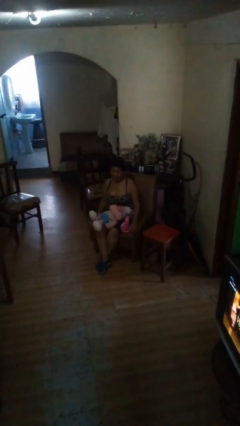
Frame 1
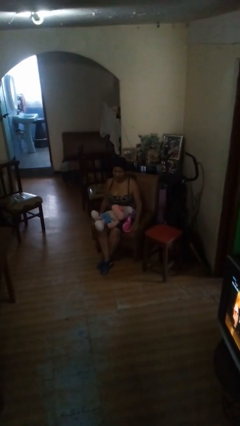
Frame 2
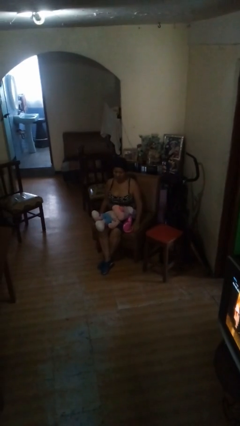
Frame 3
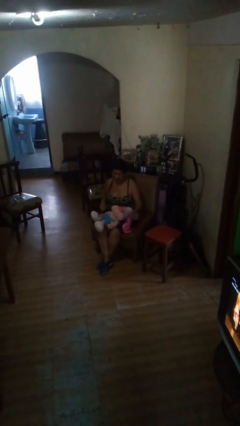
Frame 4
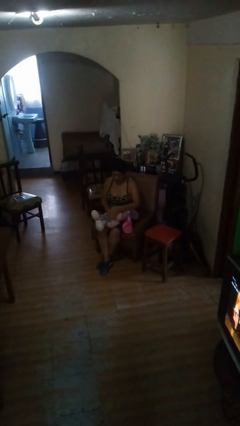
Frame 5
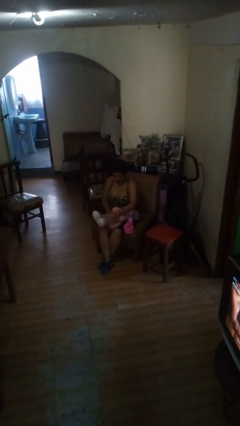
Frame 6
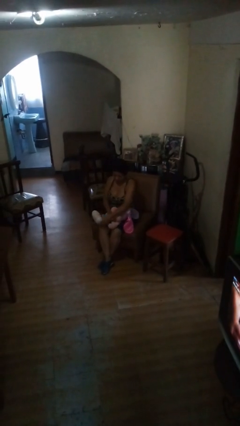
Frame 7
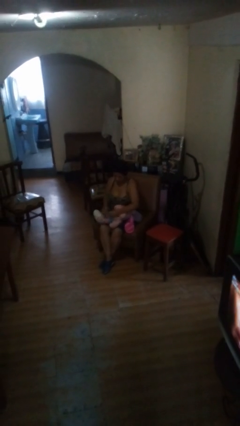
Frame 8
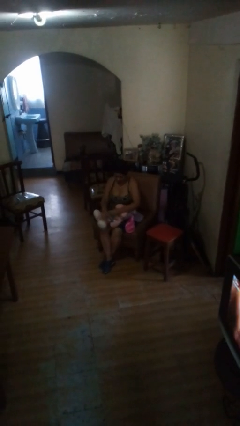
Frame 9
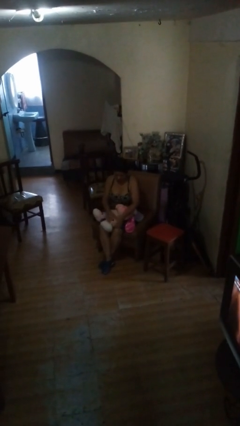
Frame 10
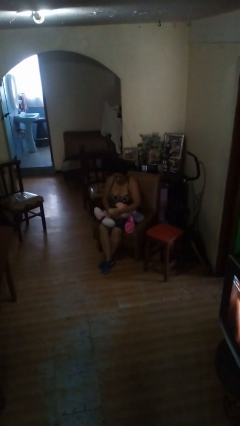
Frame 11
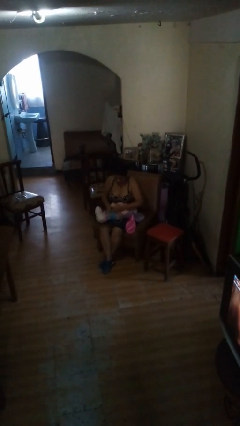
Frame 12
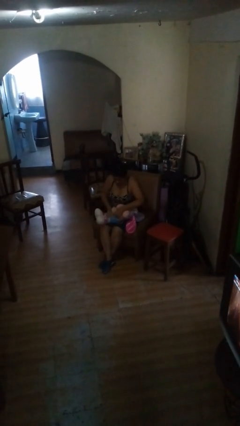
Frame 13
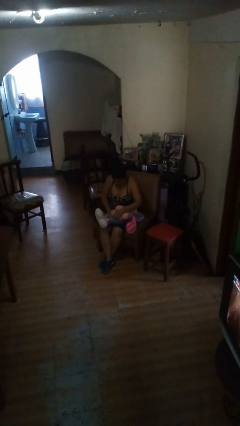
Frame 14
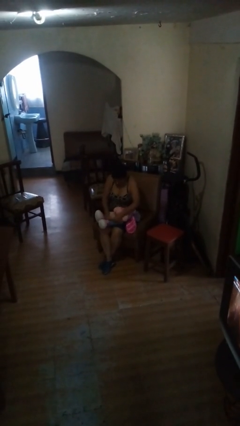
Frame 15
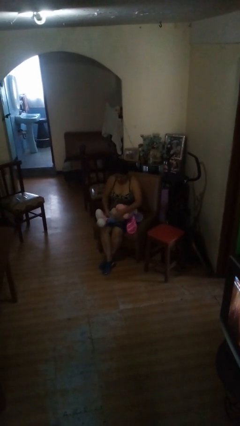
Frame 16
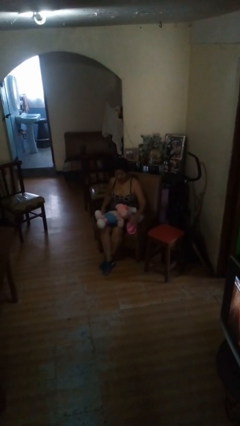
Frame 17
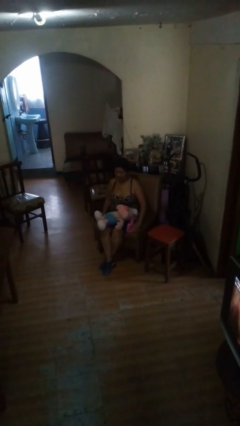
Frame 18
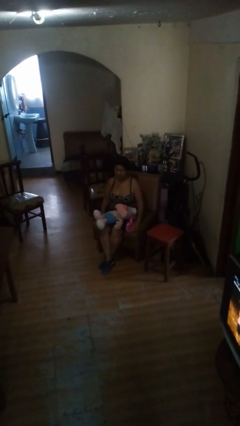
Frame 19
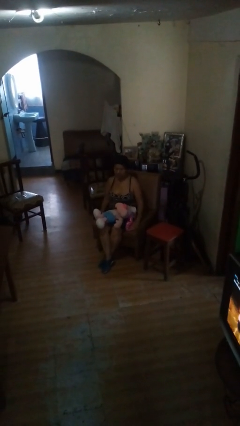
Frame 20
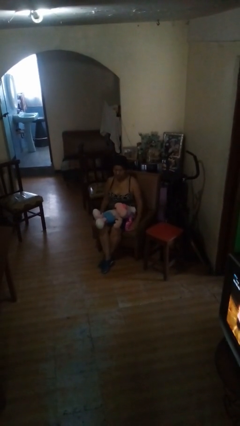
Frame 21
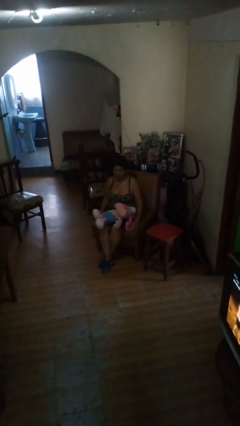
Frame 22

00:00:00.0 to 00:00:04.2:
person squeezes object

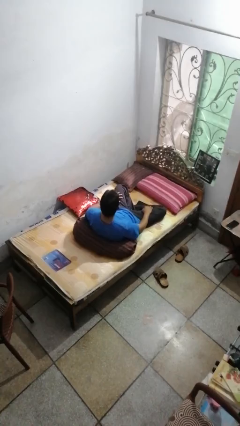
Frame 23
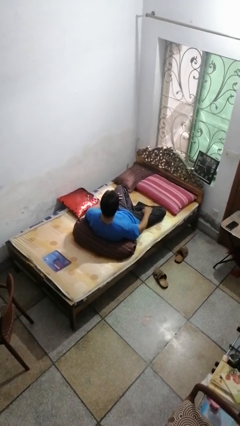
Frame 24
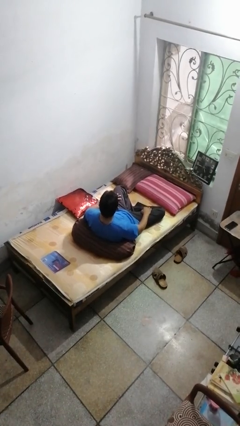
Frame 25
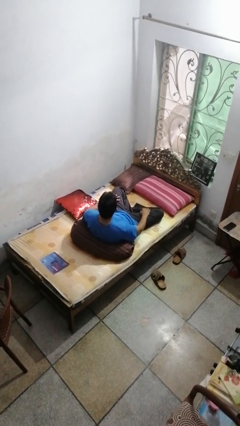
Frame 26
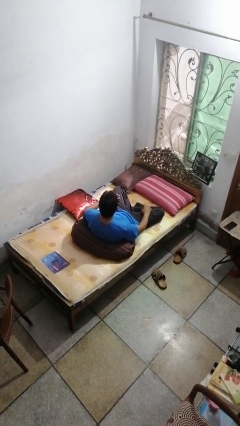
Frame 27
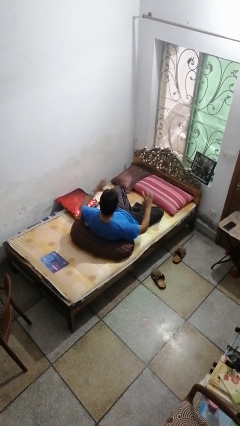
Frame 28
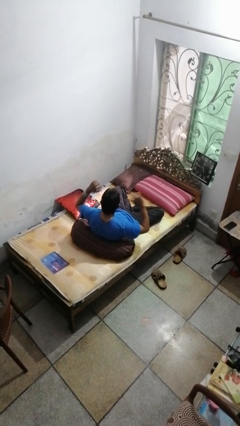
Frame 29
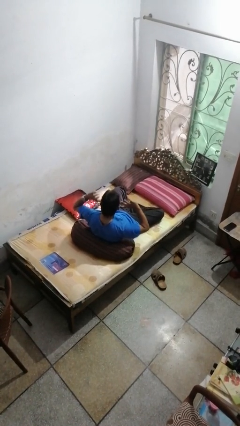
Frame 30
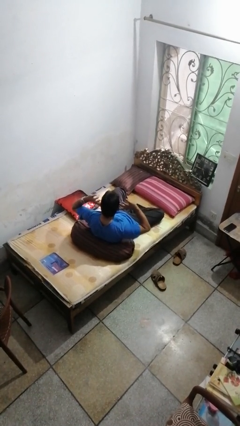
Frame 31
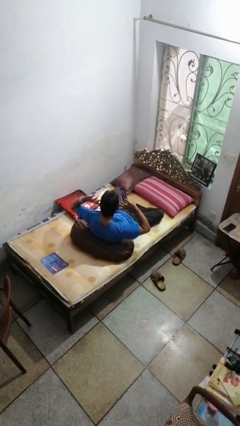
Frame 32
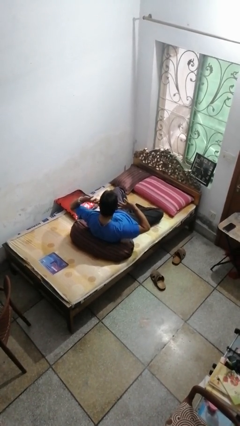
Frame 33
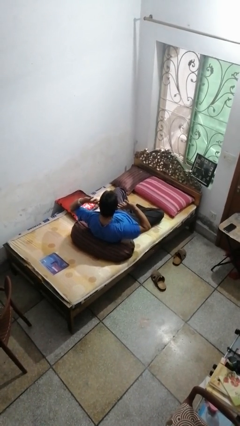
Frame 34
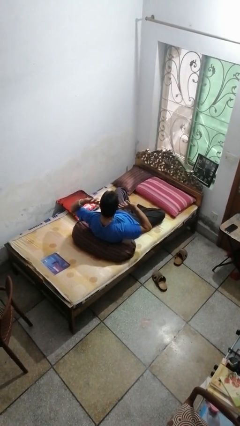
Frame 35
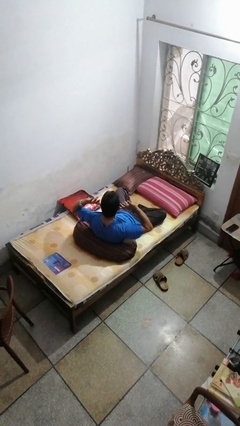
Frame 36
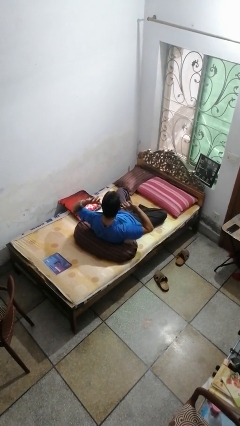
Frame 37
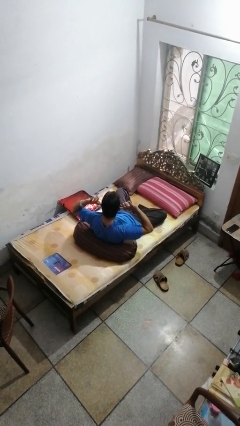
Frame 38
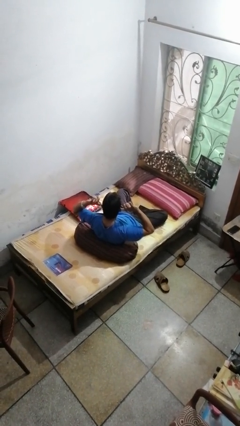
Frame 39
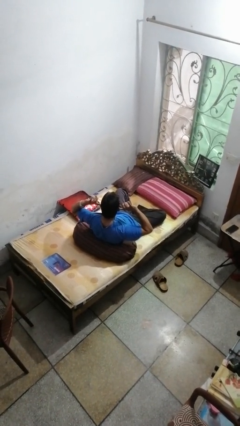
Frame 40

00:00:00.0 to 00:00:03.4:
person puts fingers in ear

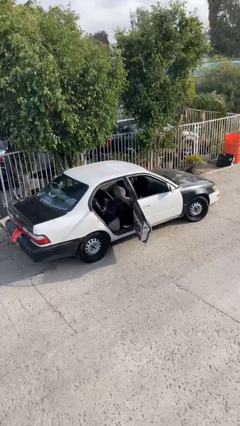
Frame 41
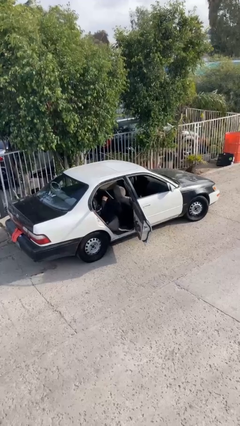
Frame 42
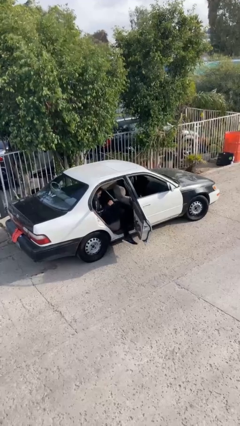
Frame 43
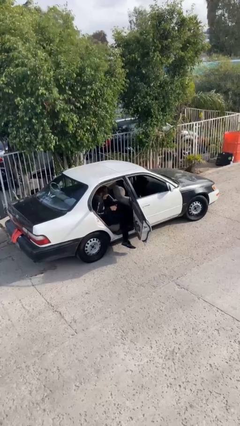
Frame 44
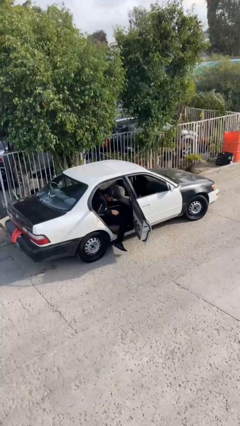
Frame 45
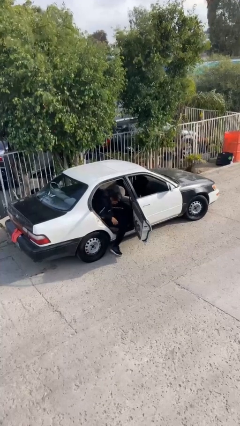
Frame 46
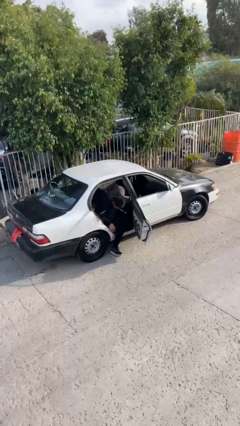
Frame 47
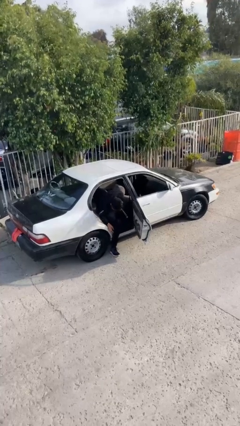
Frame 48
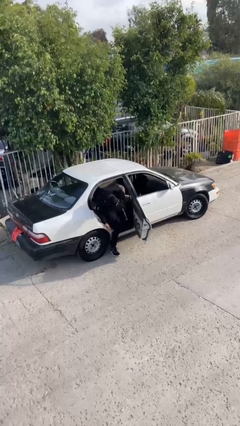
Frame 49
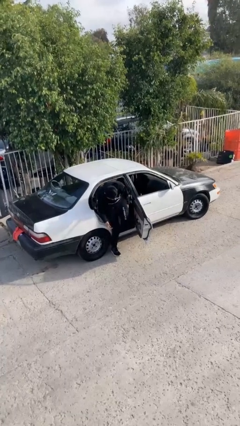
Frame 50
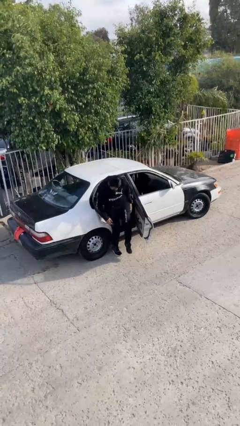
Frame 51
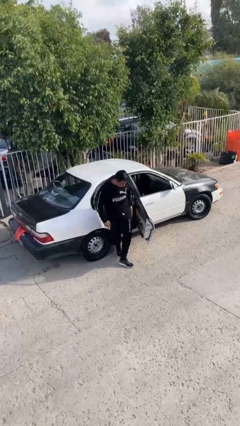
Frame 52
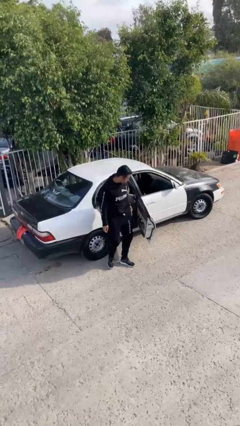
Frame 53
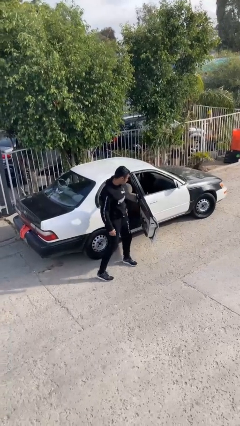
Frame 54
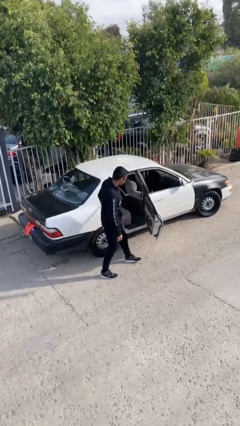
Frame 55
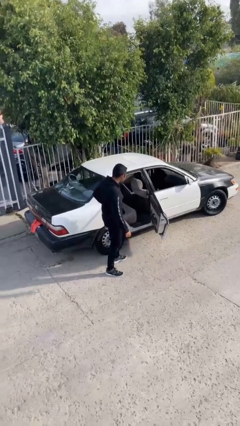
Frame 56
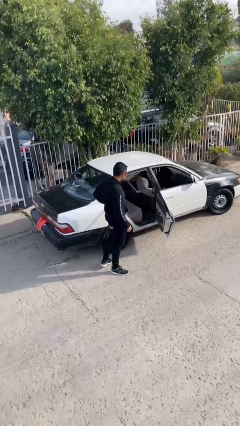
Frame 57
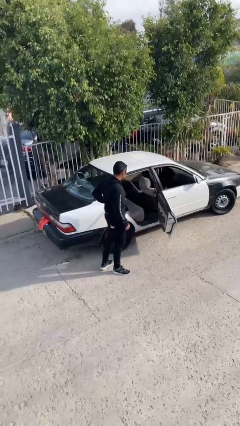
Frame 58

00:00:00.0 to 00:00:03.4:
person exits car

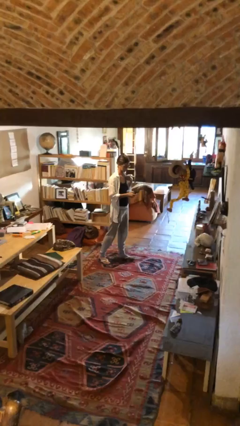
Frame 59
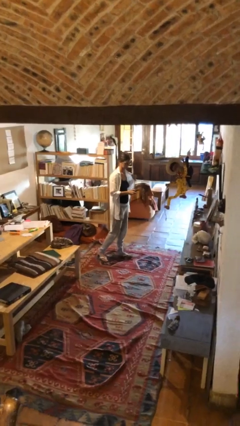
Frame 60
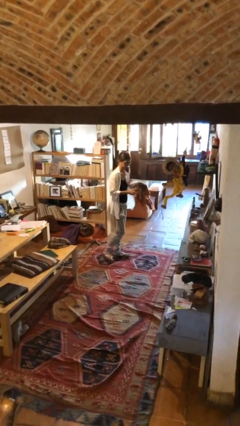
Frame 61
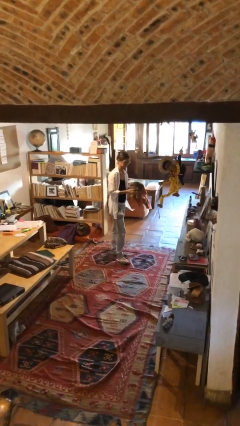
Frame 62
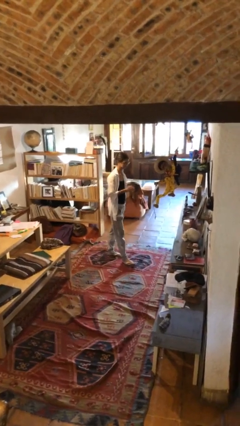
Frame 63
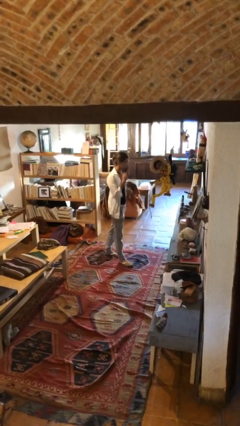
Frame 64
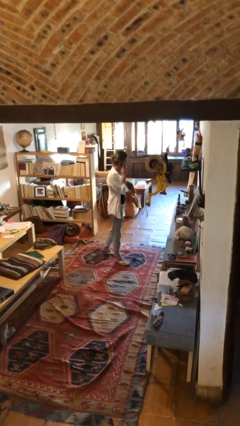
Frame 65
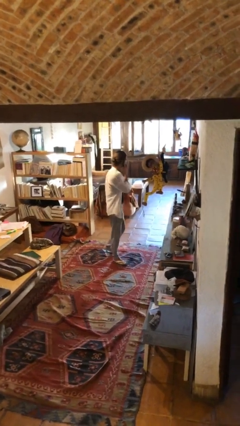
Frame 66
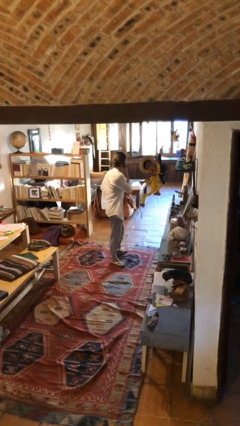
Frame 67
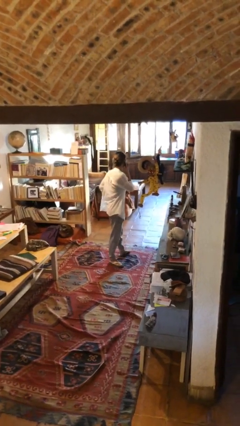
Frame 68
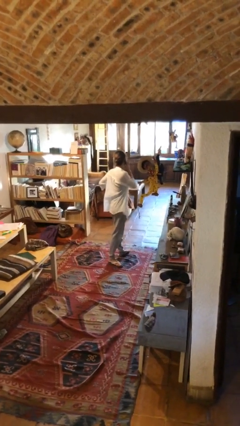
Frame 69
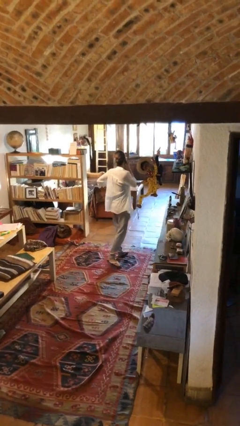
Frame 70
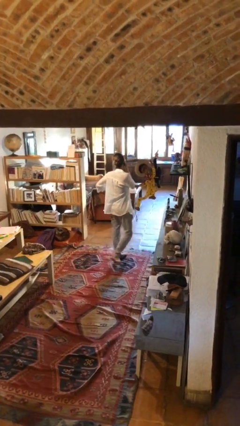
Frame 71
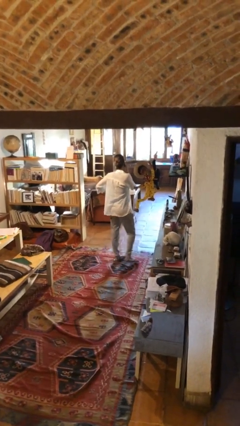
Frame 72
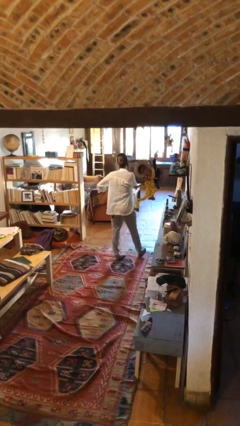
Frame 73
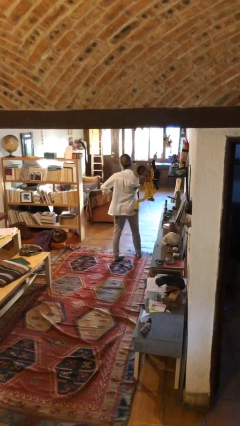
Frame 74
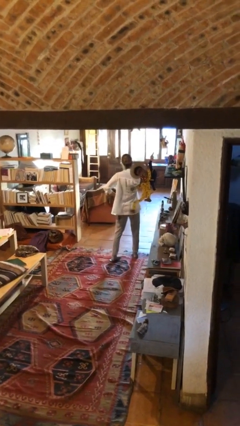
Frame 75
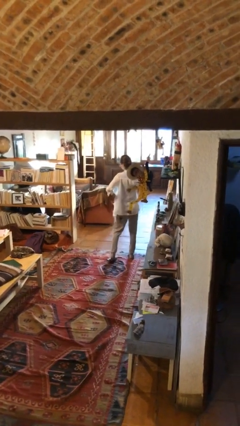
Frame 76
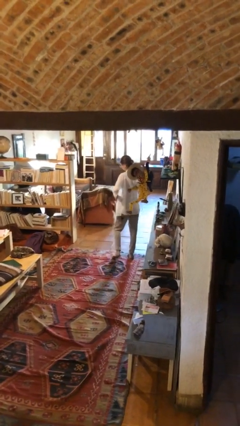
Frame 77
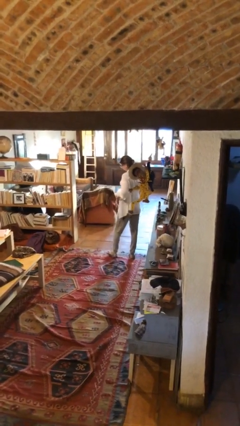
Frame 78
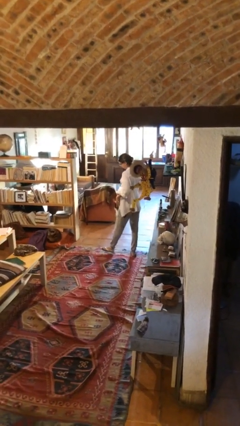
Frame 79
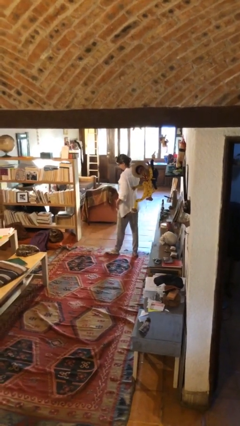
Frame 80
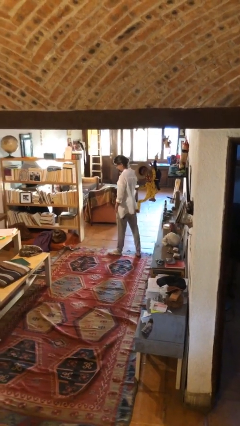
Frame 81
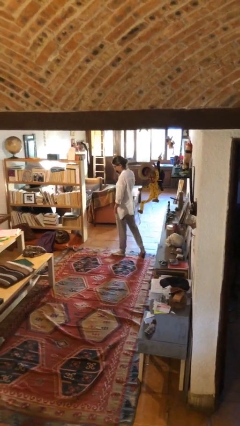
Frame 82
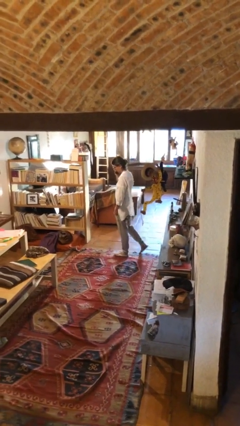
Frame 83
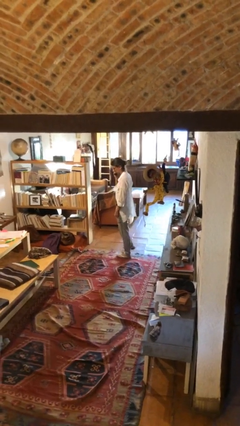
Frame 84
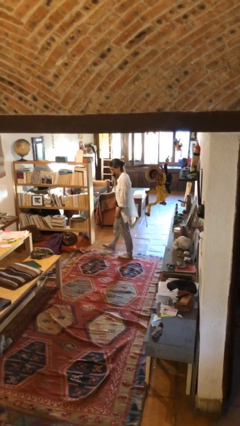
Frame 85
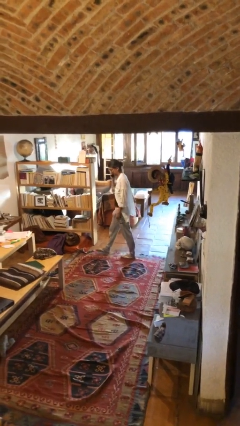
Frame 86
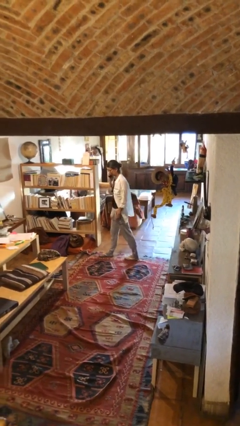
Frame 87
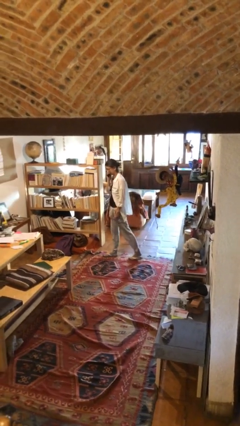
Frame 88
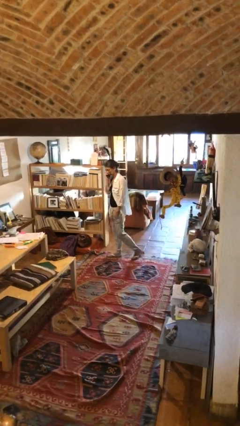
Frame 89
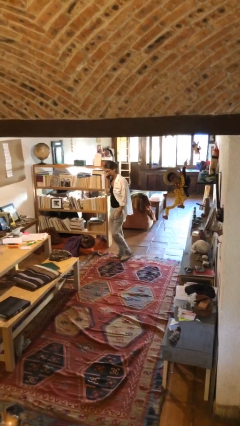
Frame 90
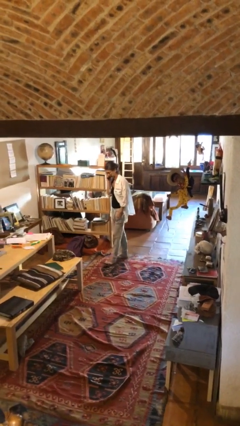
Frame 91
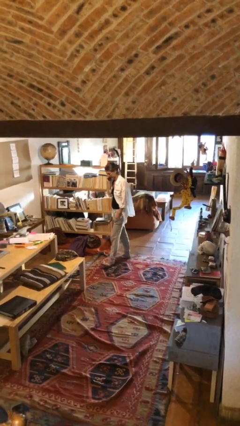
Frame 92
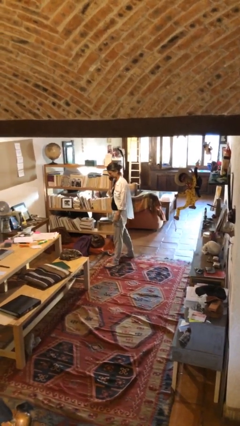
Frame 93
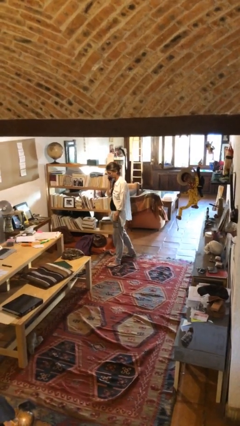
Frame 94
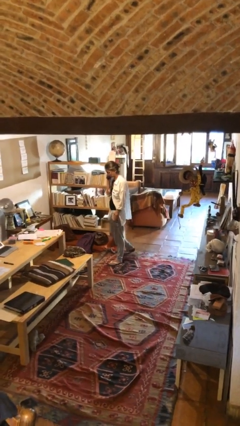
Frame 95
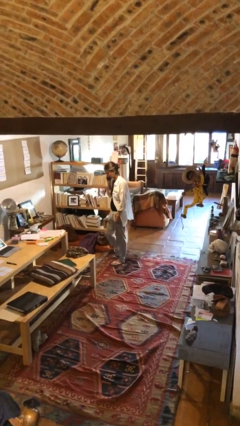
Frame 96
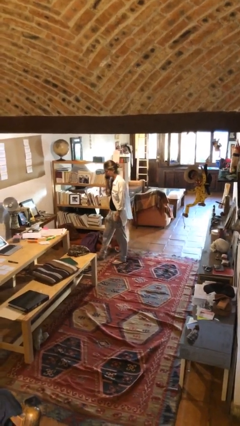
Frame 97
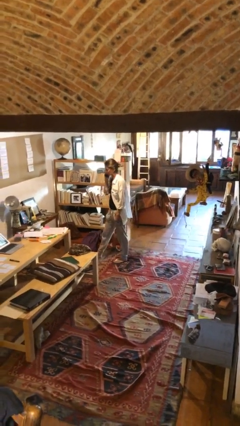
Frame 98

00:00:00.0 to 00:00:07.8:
person talks on phone
